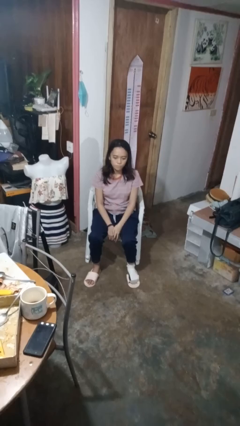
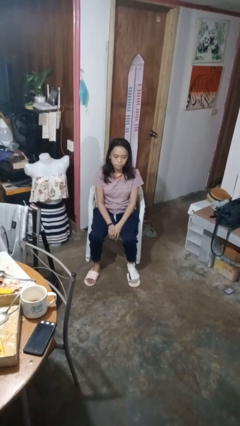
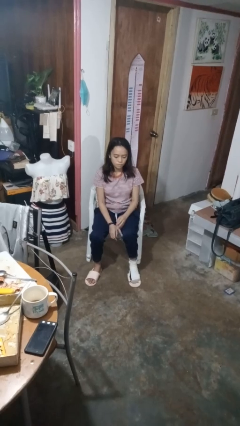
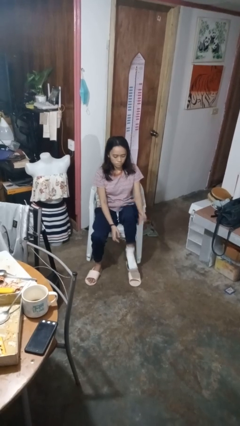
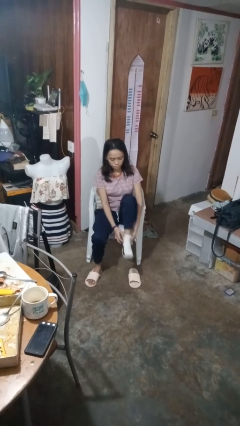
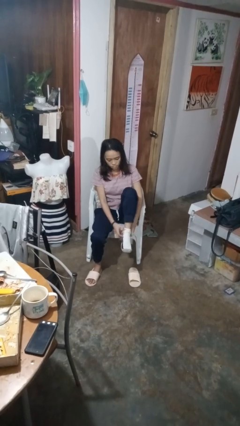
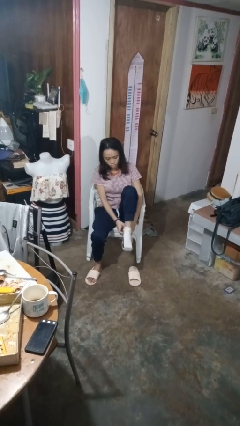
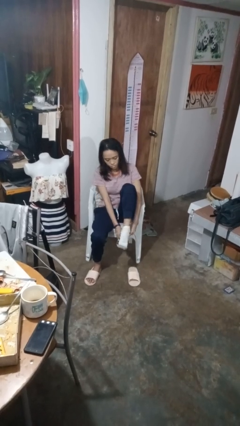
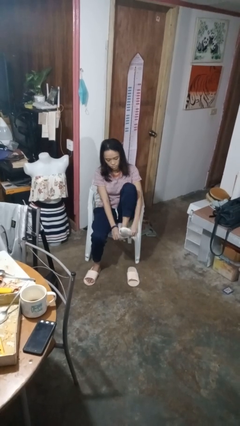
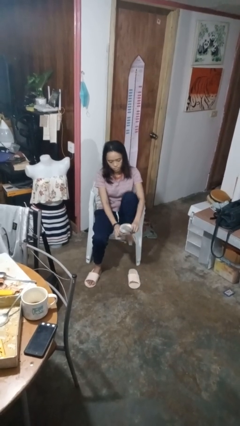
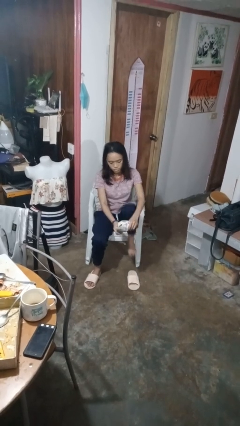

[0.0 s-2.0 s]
person takes off socks

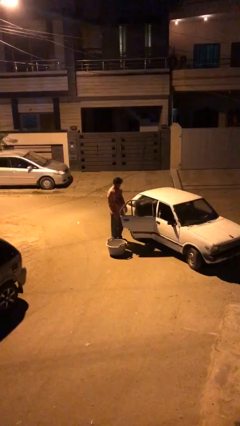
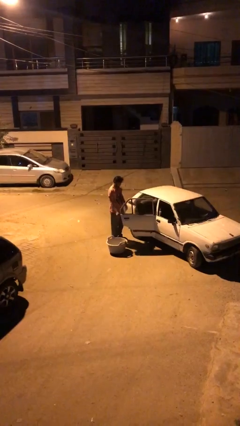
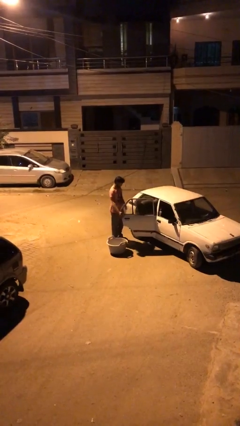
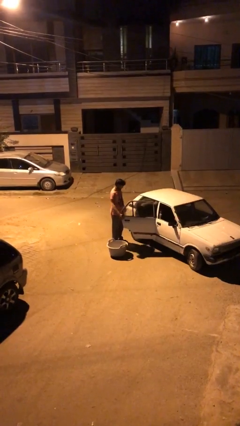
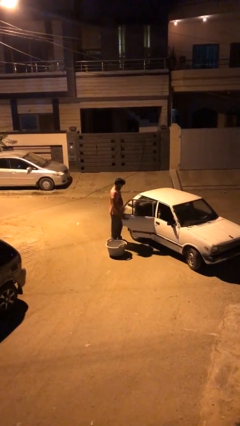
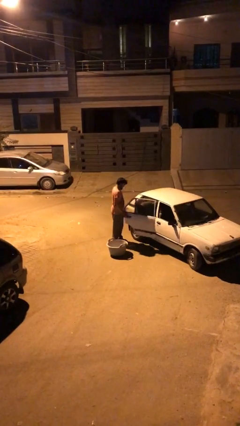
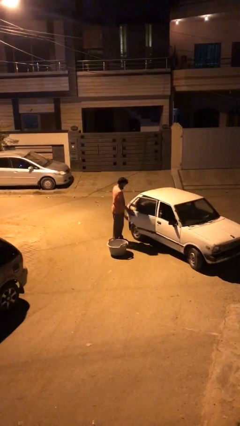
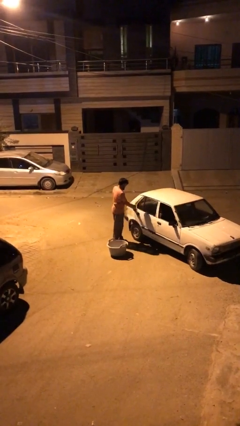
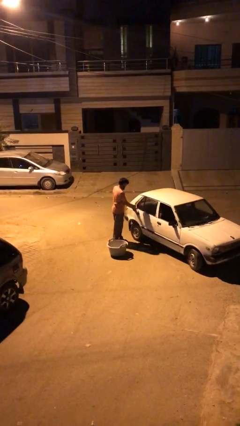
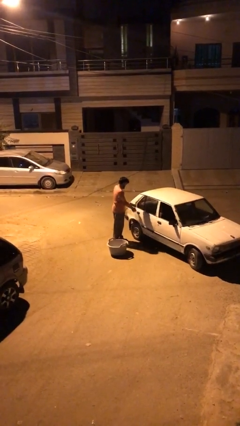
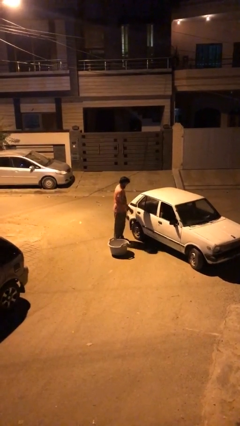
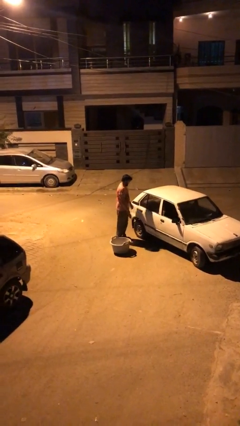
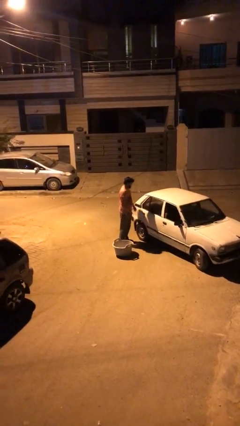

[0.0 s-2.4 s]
person closes car door

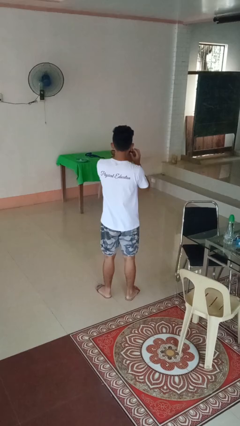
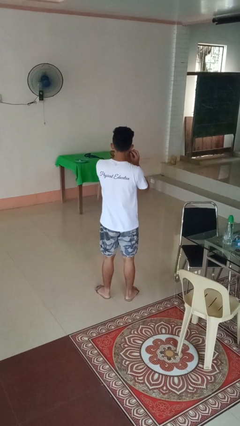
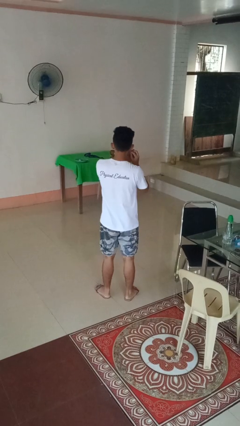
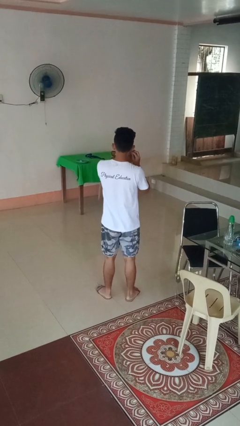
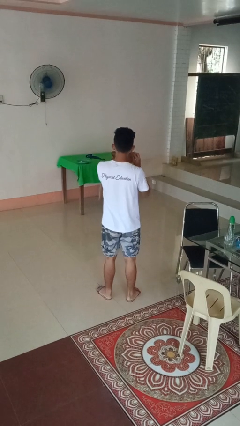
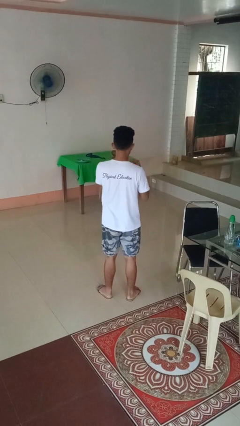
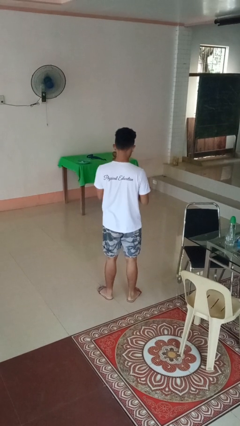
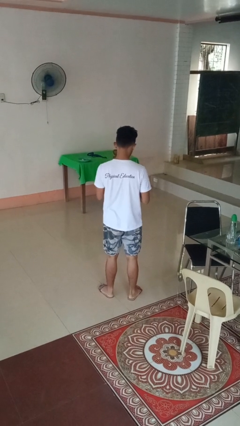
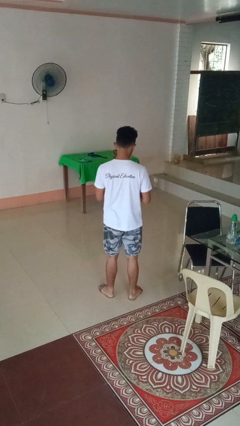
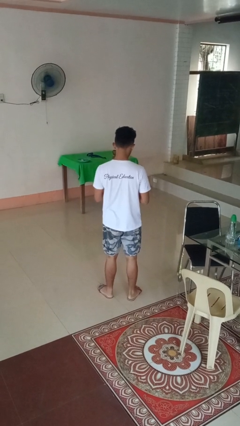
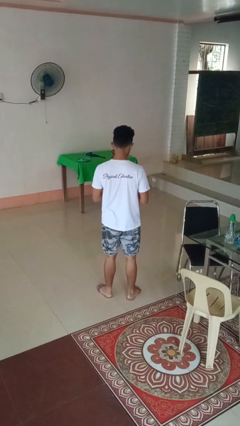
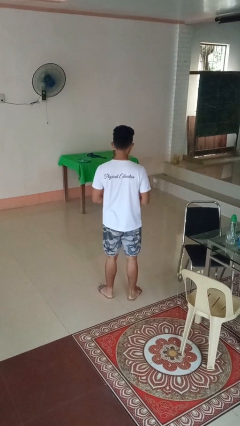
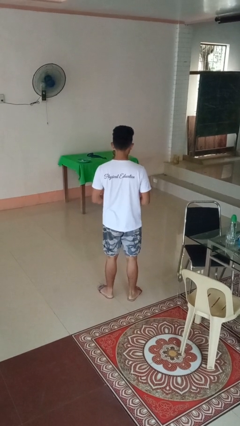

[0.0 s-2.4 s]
person takes off earrings

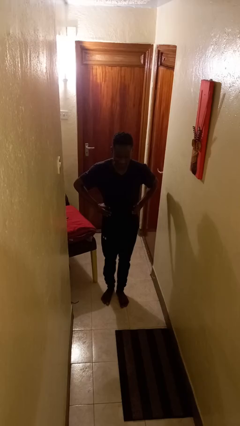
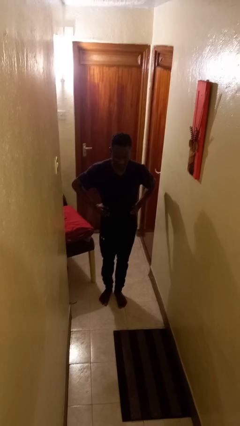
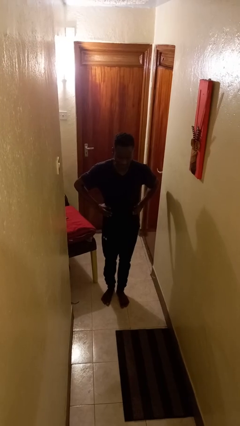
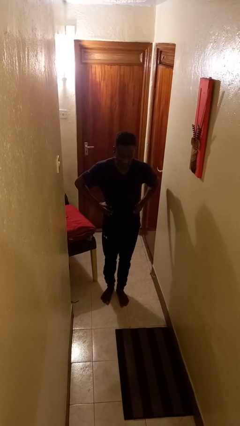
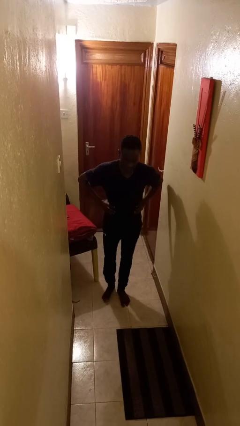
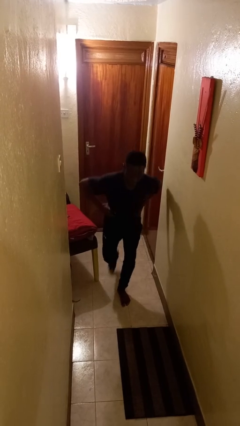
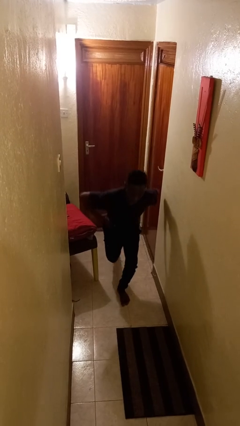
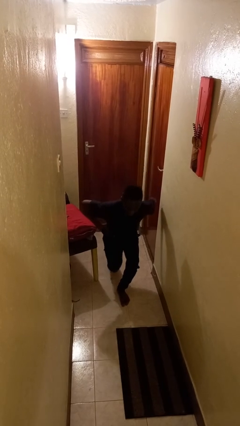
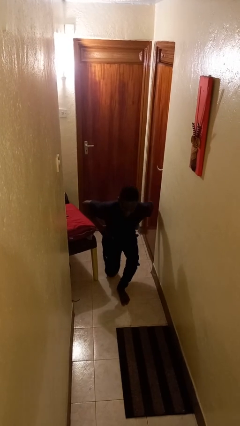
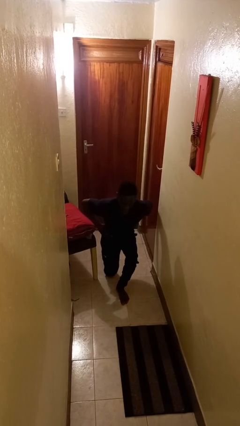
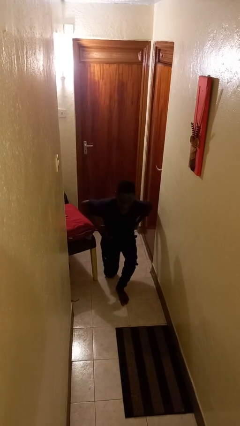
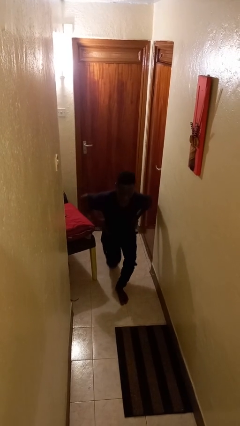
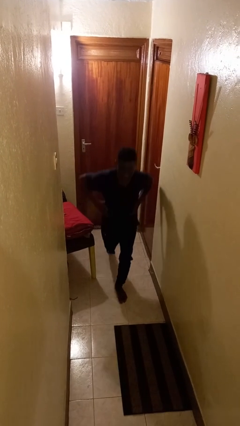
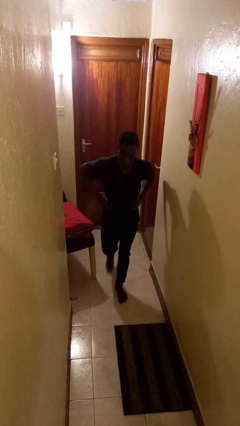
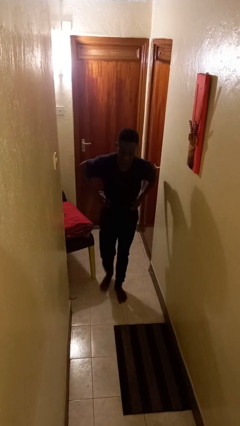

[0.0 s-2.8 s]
person exercises with lunges

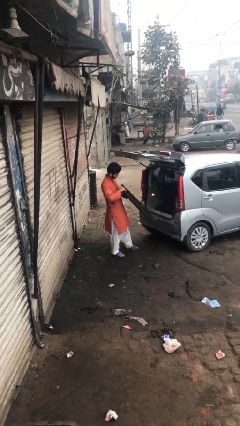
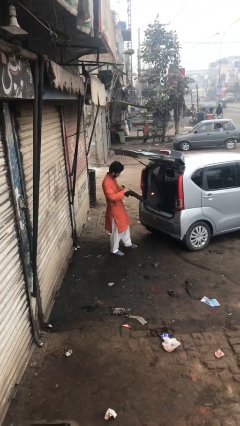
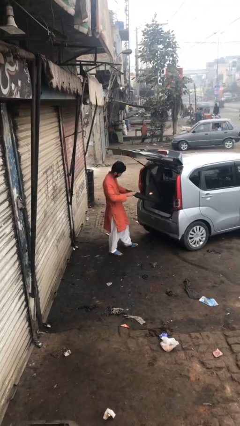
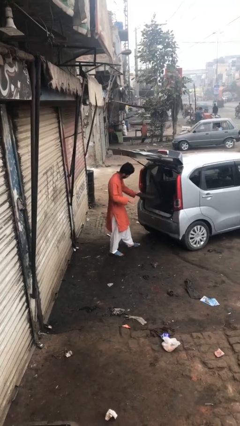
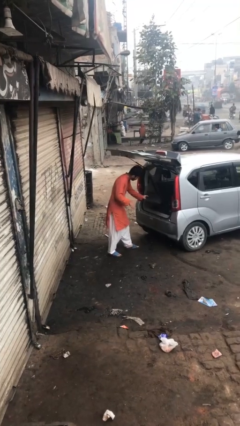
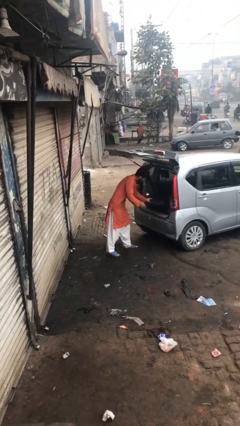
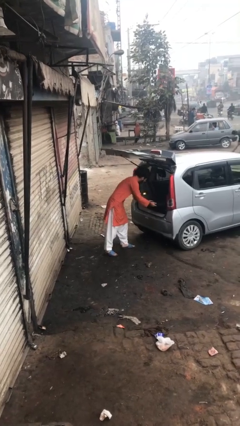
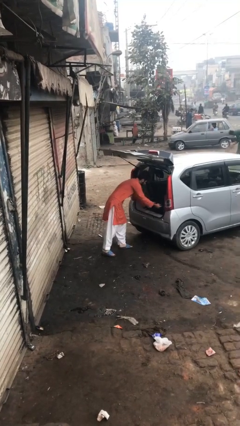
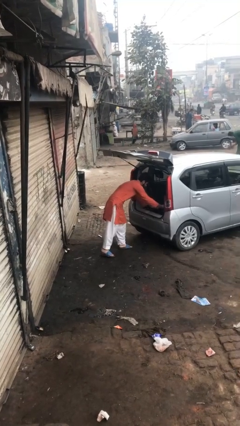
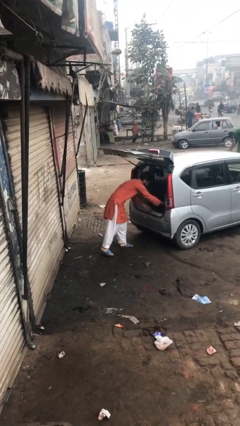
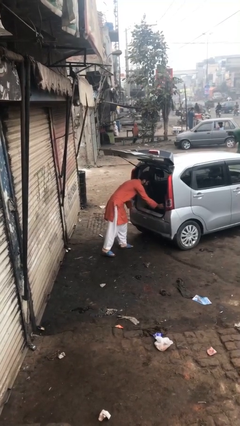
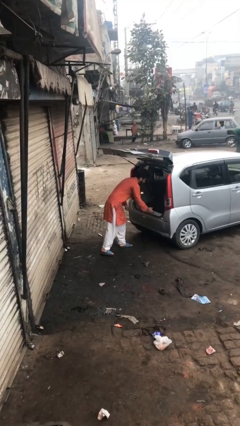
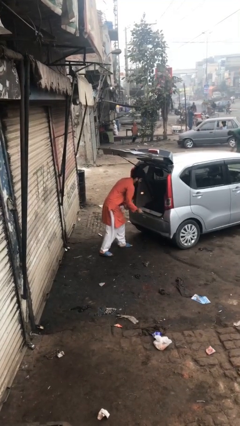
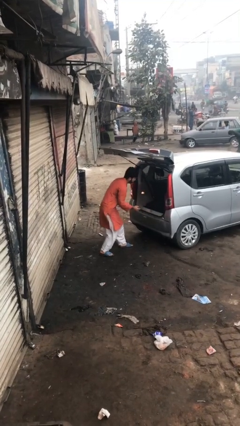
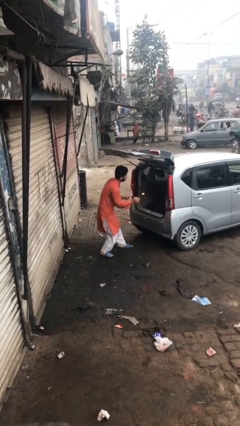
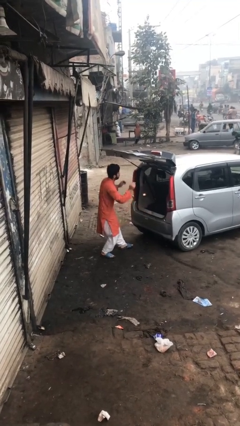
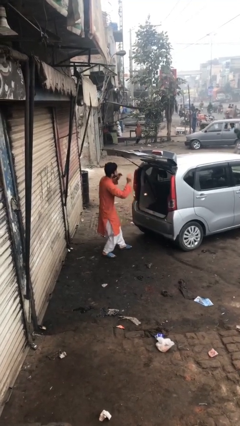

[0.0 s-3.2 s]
person loads car

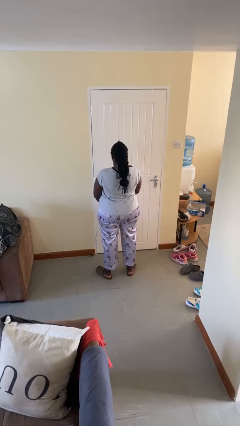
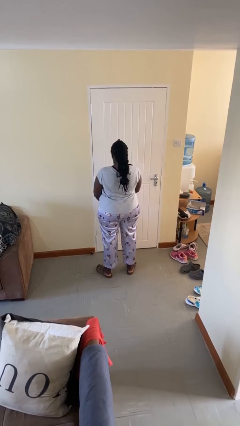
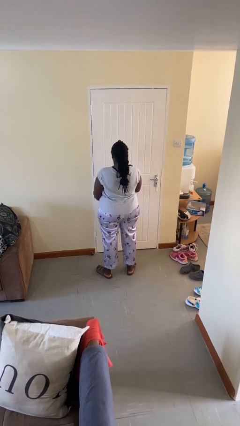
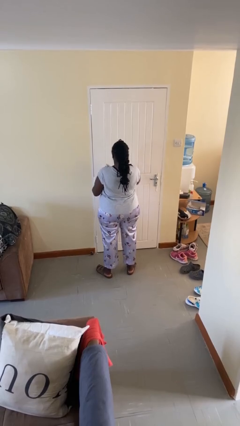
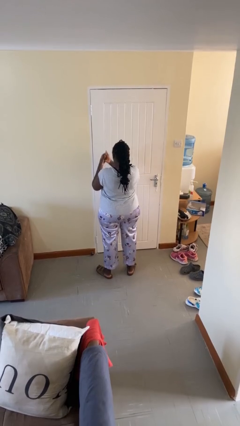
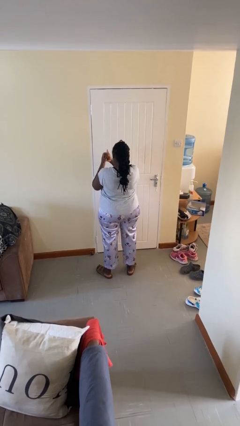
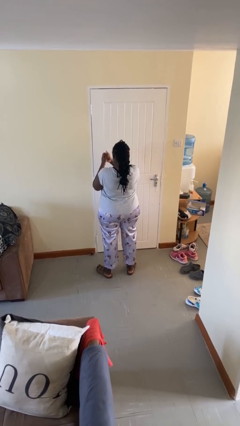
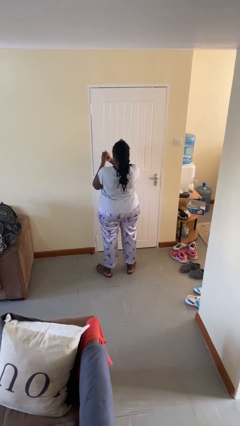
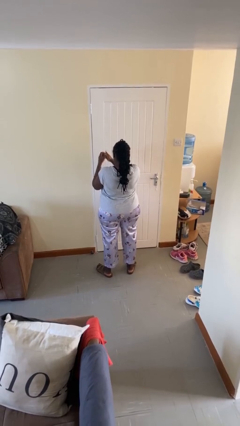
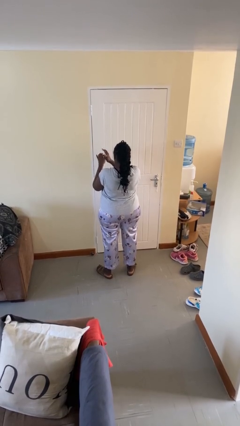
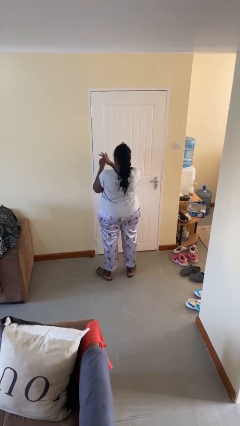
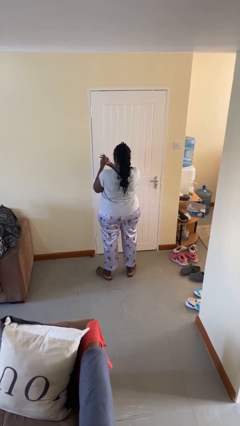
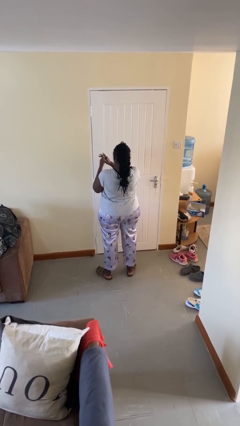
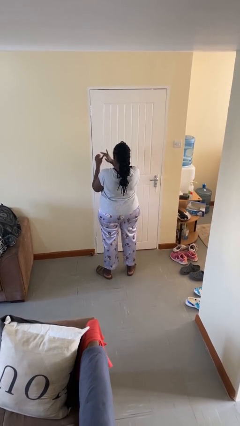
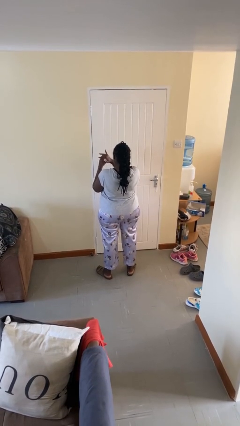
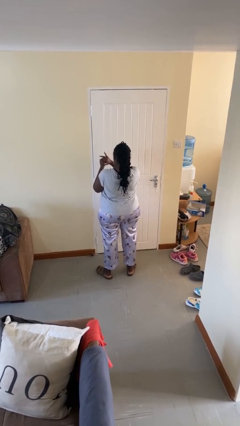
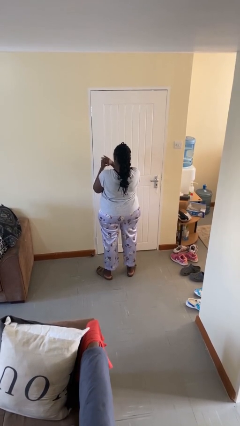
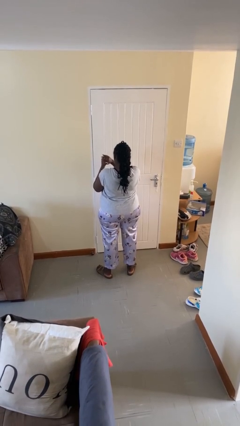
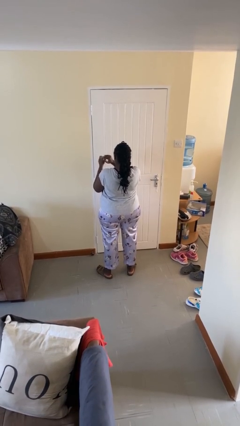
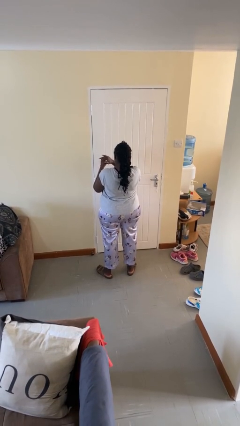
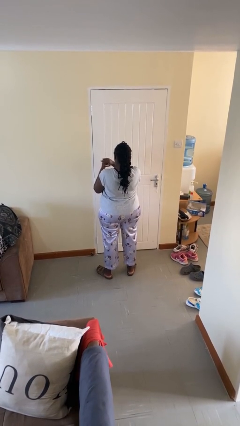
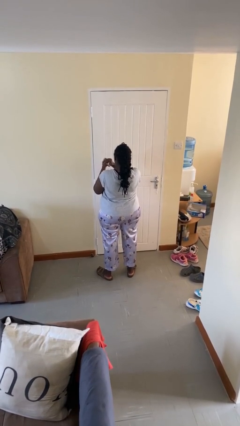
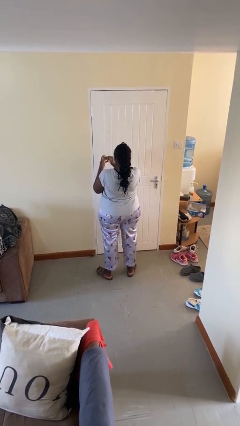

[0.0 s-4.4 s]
person cracks knuckles

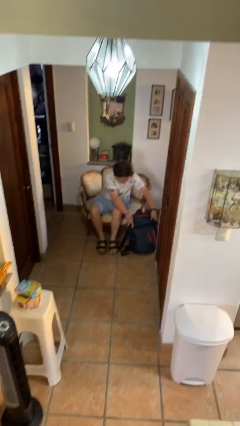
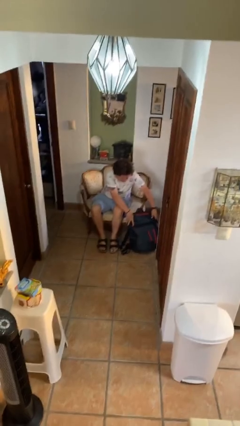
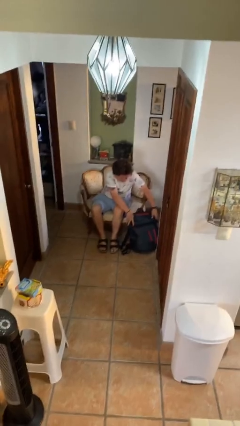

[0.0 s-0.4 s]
person puts down object on floor
